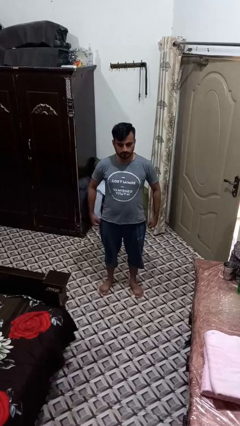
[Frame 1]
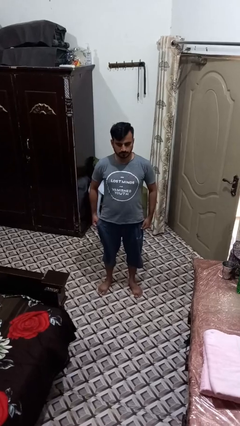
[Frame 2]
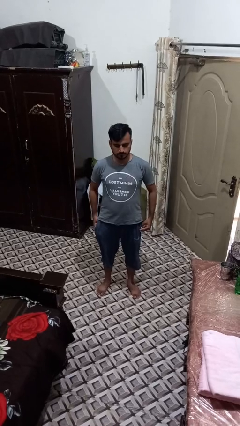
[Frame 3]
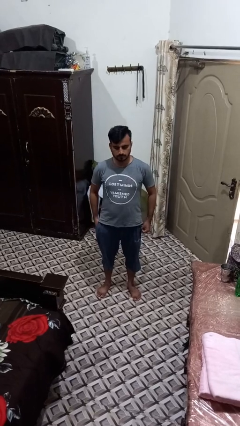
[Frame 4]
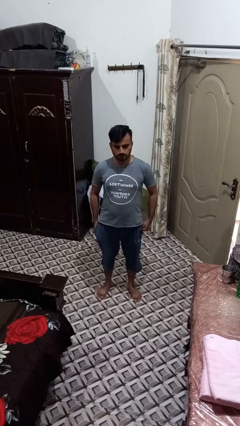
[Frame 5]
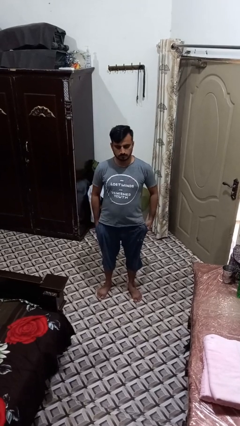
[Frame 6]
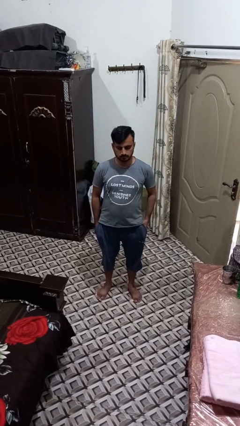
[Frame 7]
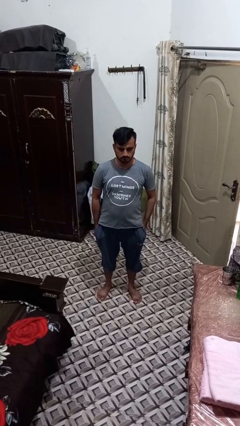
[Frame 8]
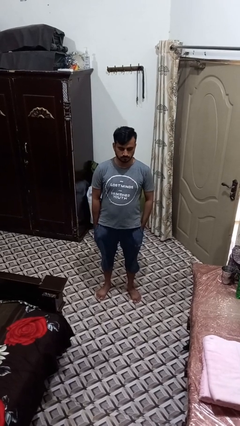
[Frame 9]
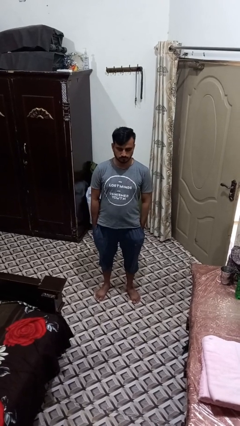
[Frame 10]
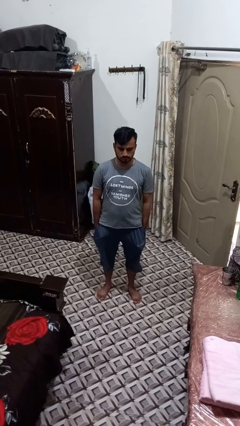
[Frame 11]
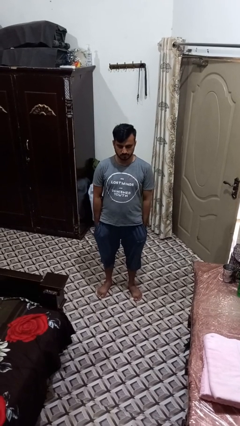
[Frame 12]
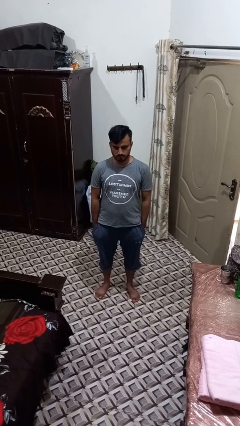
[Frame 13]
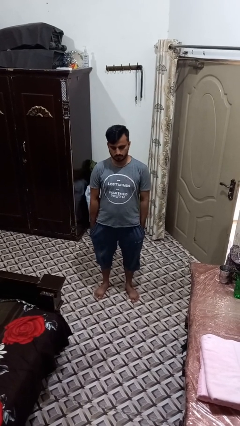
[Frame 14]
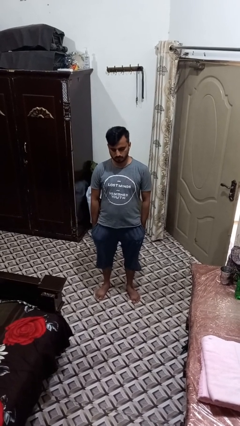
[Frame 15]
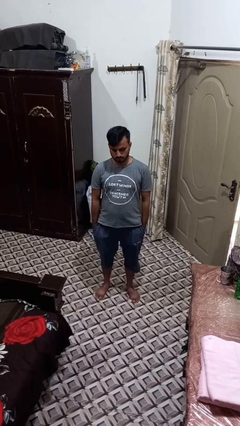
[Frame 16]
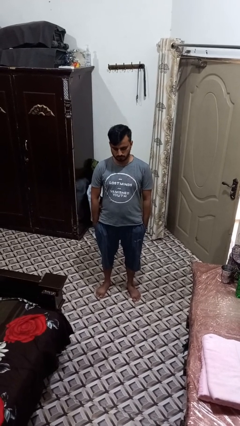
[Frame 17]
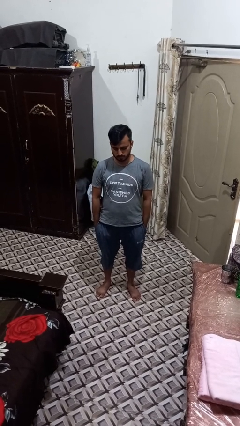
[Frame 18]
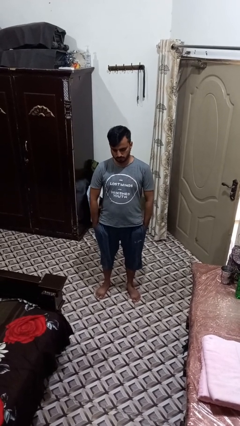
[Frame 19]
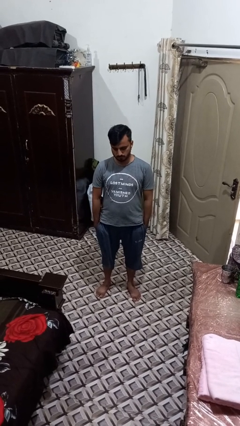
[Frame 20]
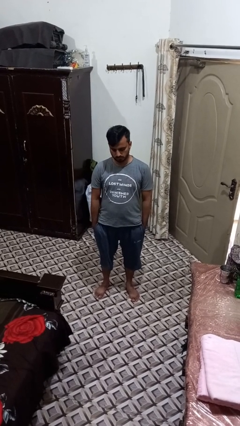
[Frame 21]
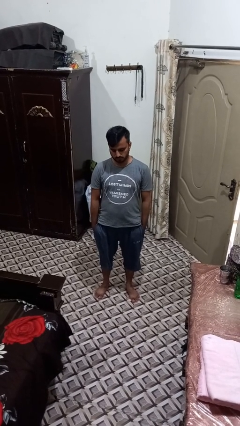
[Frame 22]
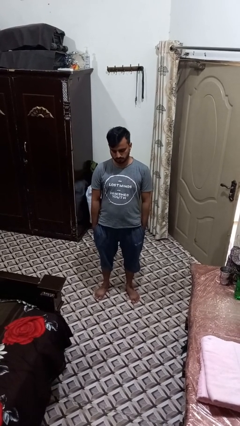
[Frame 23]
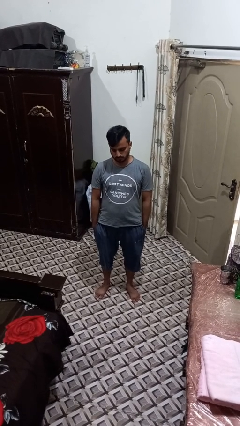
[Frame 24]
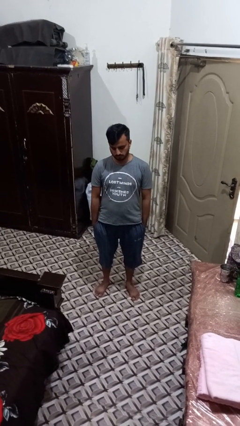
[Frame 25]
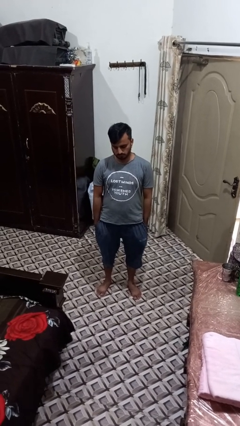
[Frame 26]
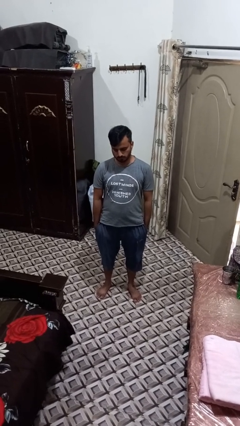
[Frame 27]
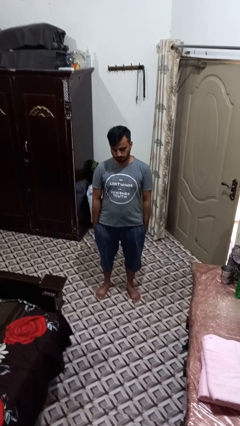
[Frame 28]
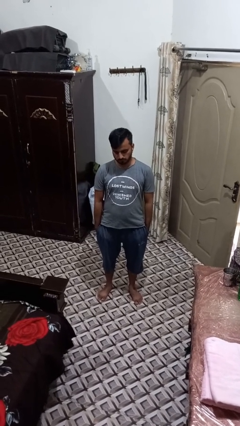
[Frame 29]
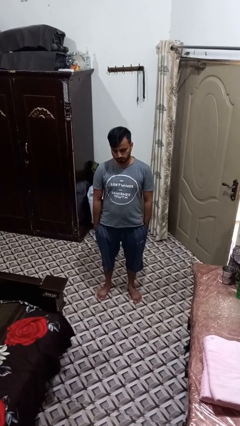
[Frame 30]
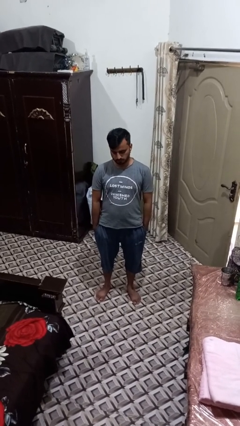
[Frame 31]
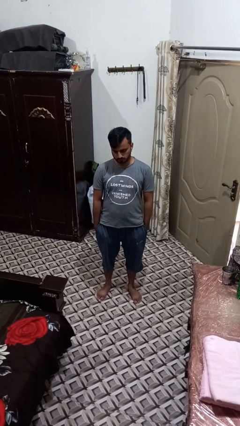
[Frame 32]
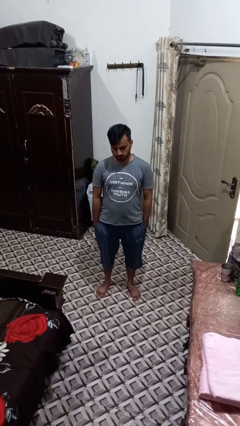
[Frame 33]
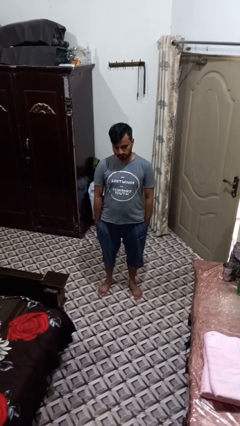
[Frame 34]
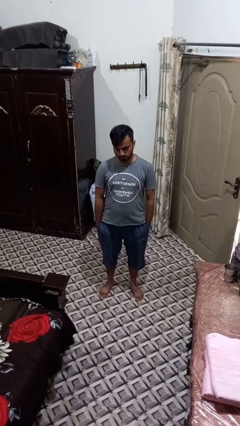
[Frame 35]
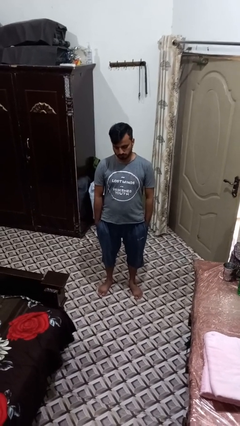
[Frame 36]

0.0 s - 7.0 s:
person puts hands in back pockets

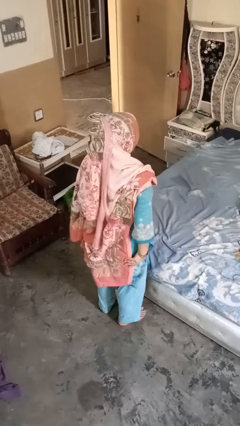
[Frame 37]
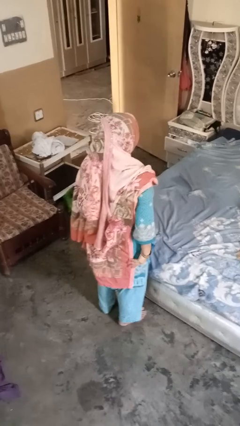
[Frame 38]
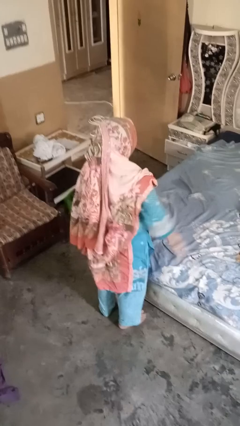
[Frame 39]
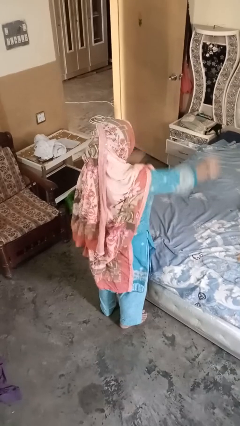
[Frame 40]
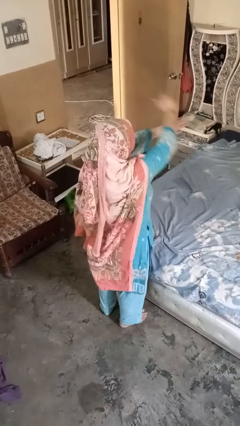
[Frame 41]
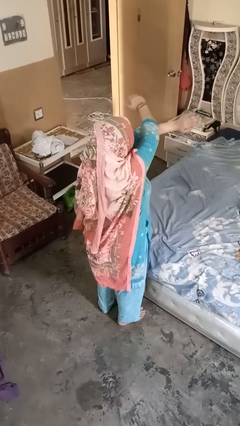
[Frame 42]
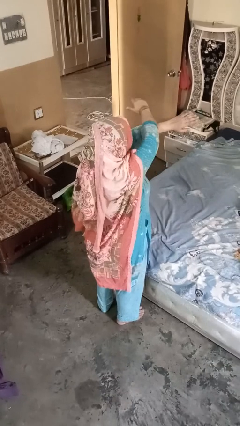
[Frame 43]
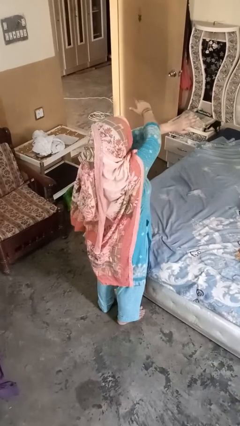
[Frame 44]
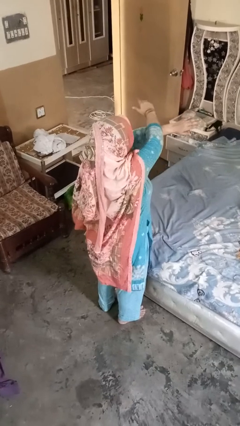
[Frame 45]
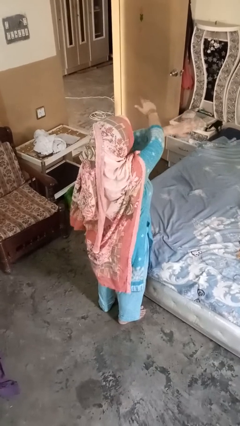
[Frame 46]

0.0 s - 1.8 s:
person gestures arms x

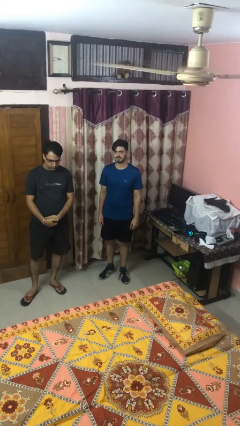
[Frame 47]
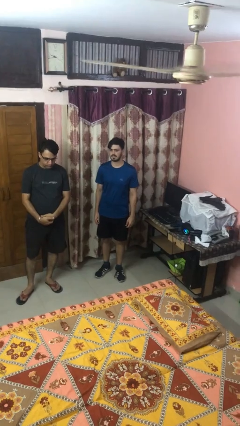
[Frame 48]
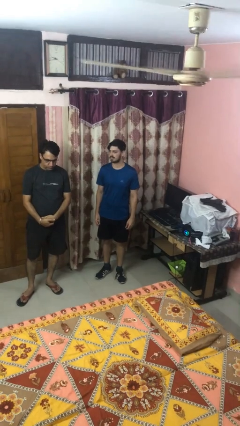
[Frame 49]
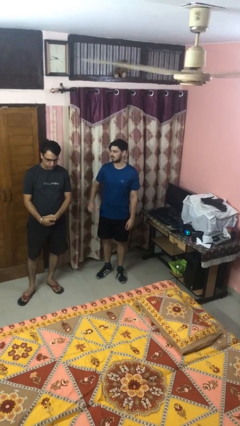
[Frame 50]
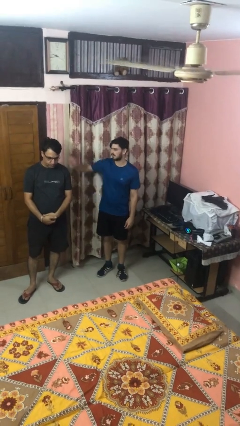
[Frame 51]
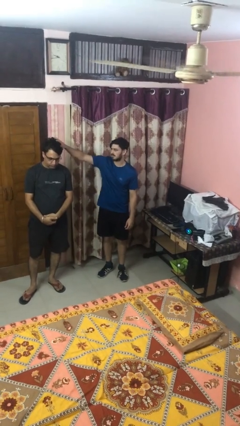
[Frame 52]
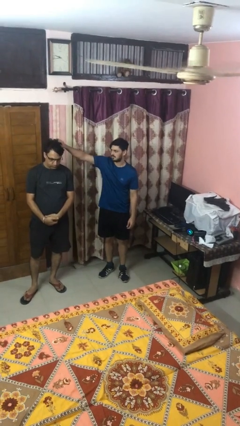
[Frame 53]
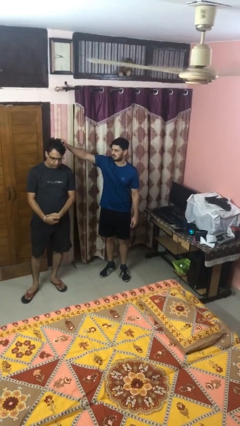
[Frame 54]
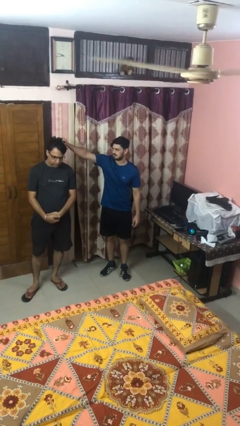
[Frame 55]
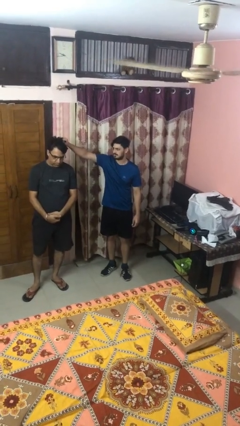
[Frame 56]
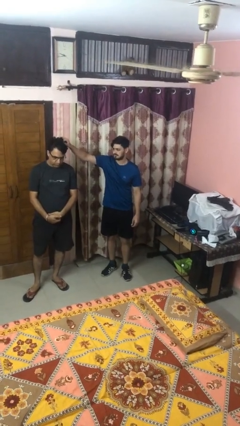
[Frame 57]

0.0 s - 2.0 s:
person grabs person by hair

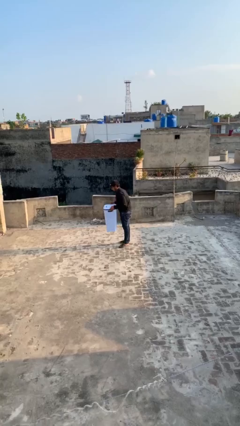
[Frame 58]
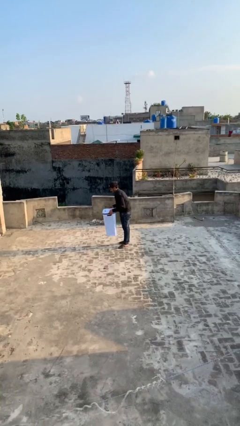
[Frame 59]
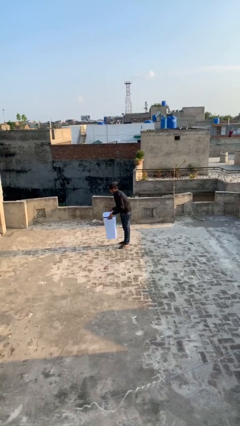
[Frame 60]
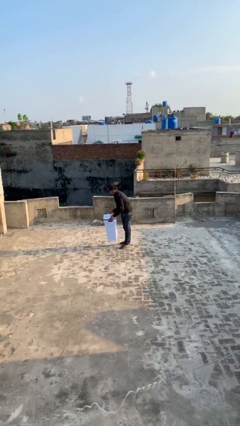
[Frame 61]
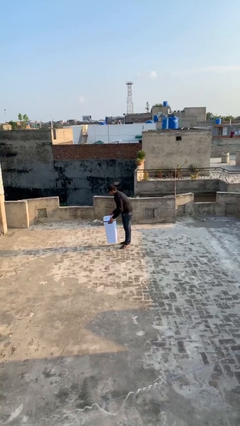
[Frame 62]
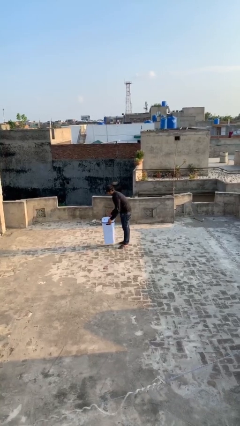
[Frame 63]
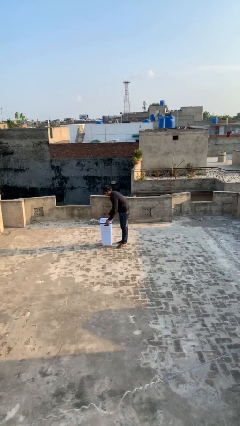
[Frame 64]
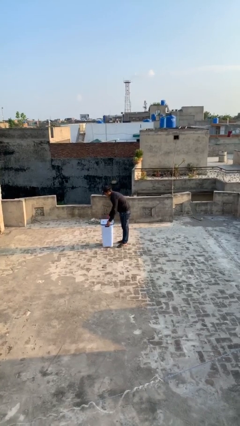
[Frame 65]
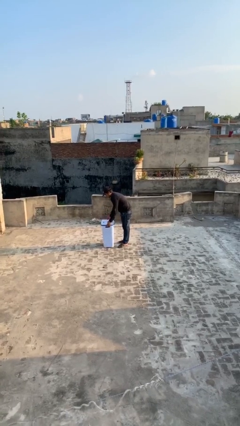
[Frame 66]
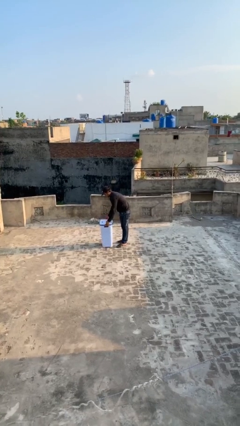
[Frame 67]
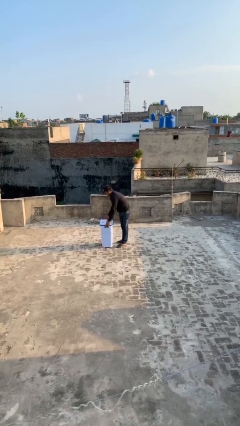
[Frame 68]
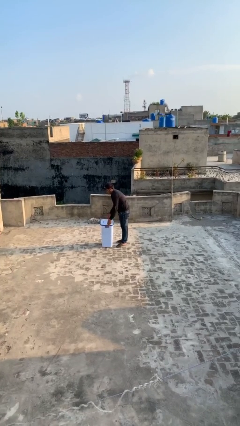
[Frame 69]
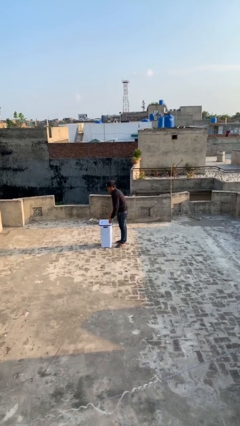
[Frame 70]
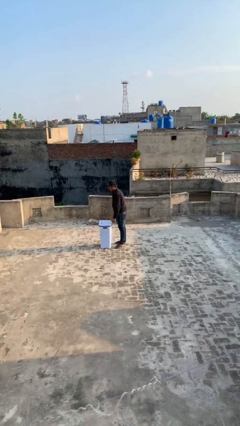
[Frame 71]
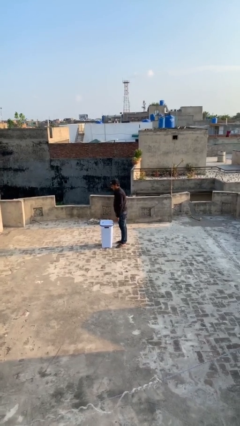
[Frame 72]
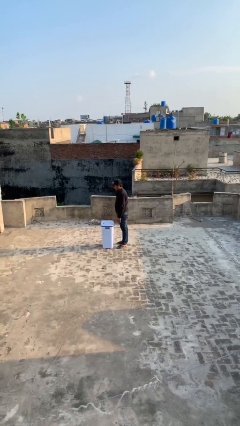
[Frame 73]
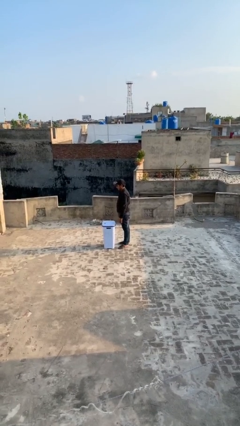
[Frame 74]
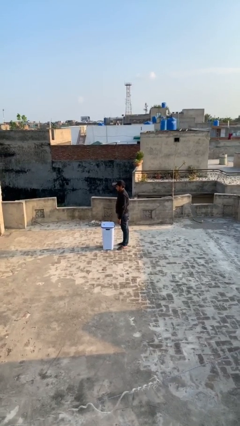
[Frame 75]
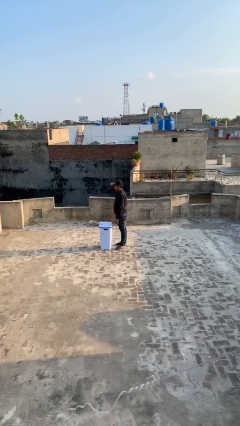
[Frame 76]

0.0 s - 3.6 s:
person puts down object on floor

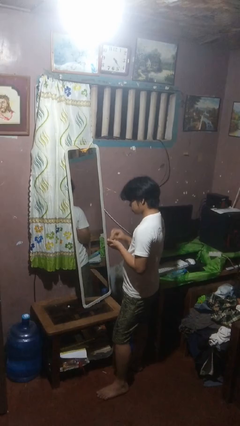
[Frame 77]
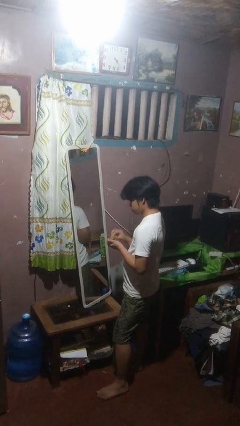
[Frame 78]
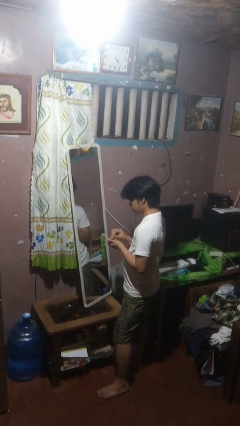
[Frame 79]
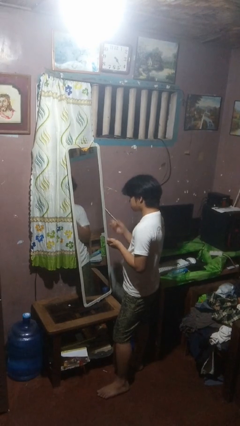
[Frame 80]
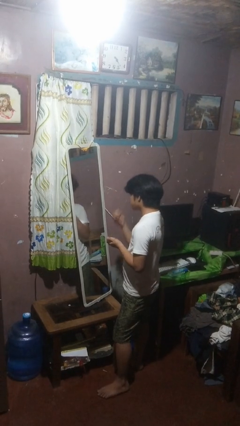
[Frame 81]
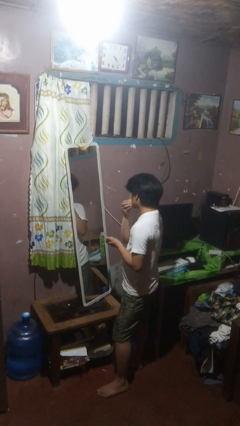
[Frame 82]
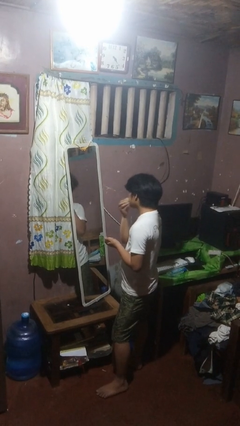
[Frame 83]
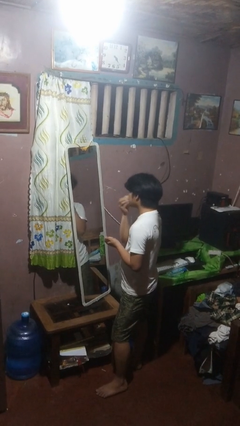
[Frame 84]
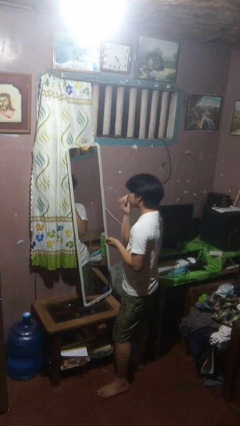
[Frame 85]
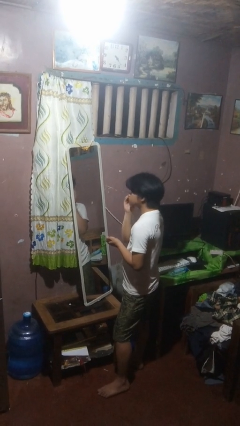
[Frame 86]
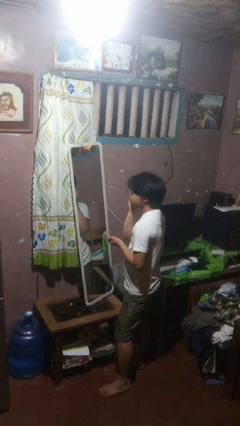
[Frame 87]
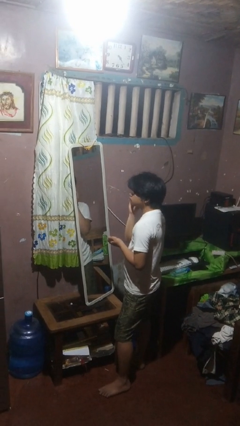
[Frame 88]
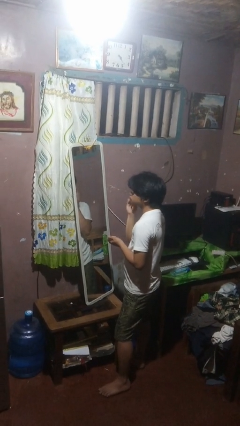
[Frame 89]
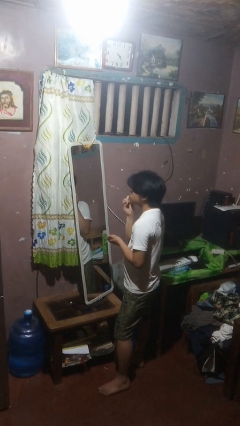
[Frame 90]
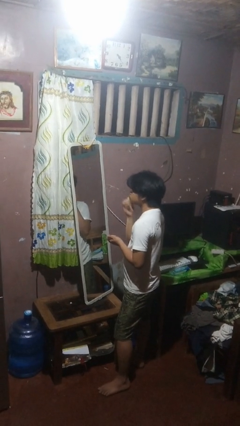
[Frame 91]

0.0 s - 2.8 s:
person applies foundation makeup

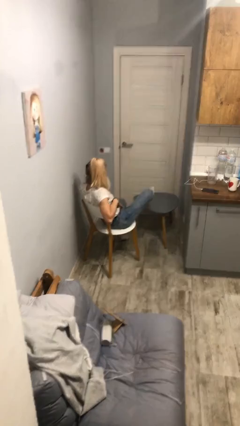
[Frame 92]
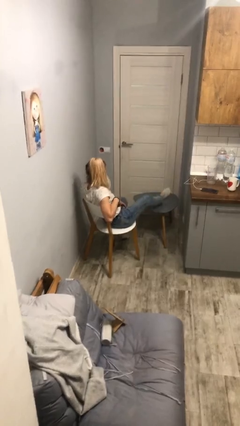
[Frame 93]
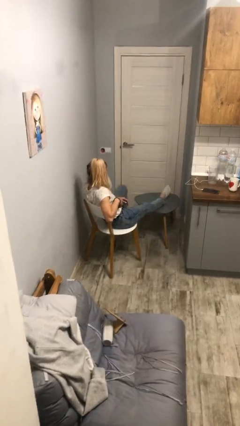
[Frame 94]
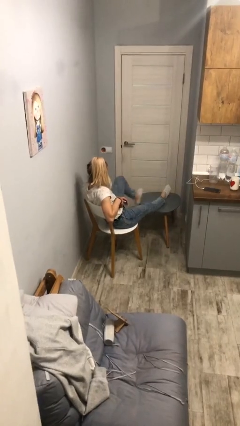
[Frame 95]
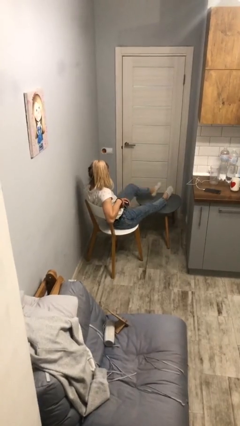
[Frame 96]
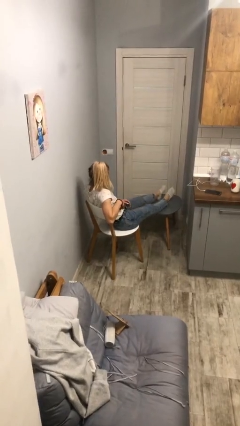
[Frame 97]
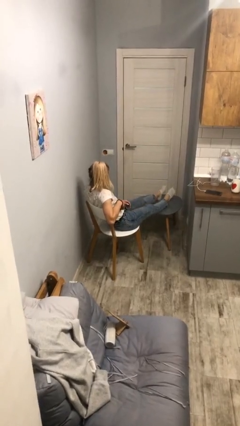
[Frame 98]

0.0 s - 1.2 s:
person puts feet up
